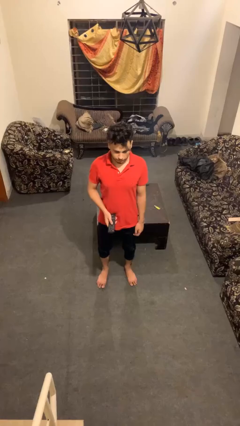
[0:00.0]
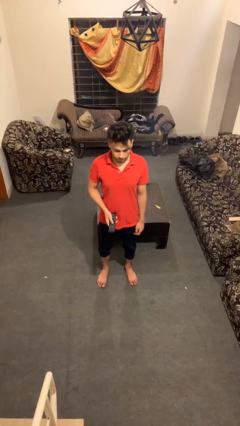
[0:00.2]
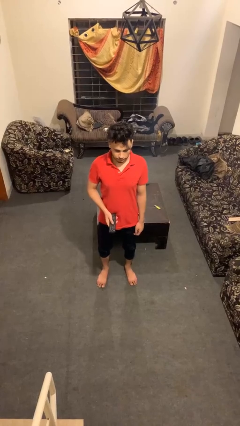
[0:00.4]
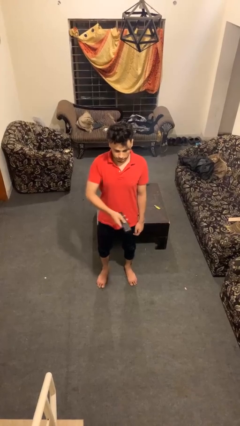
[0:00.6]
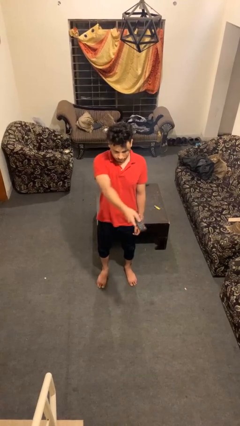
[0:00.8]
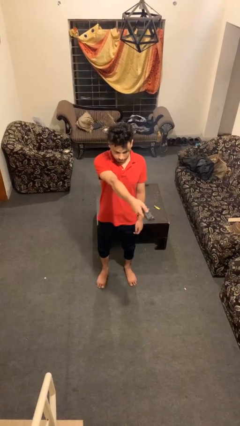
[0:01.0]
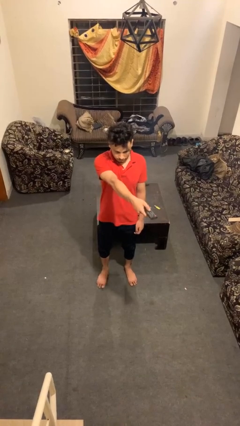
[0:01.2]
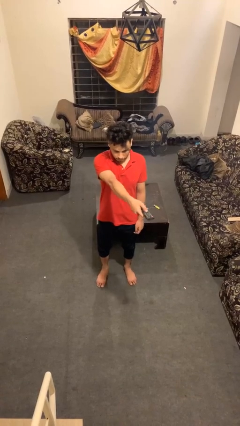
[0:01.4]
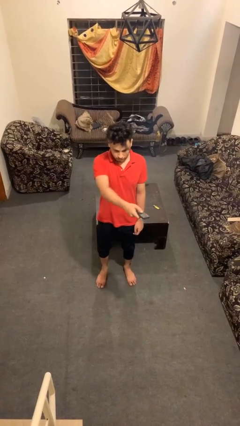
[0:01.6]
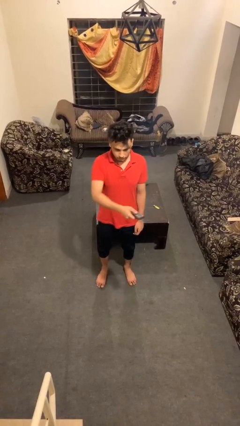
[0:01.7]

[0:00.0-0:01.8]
person uses television remote

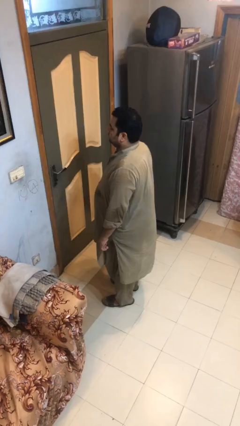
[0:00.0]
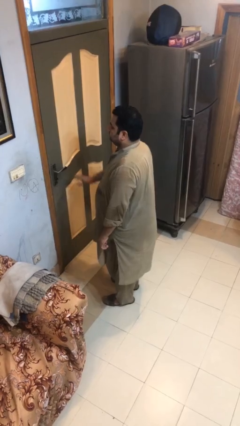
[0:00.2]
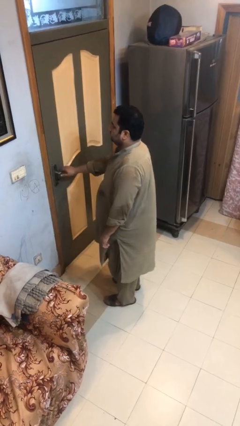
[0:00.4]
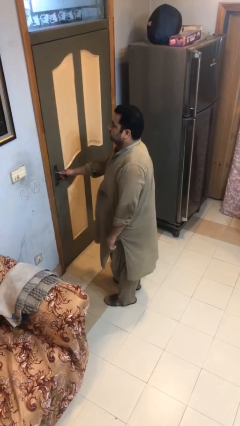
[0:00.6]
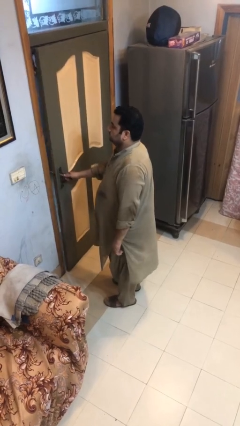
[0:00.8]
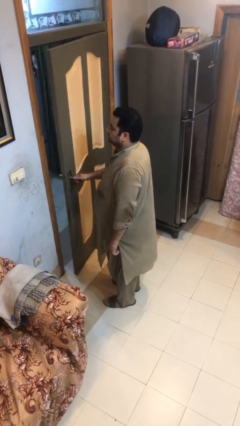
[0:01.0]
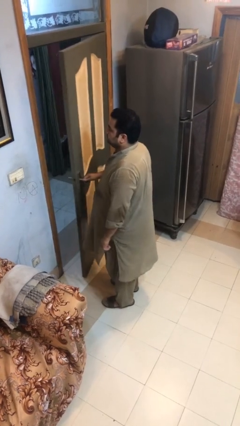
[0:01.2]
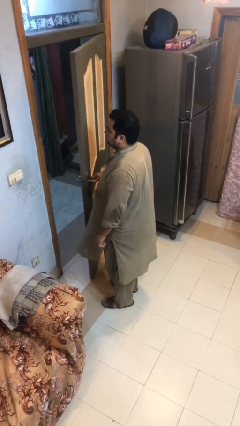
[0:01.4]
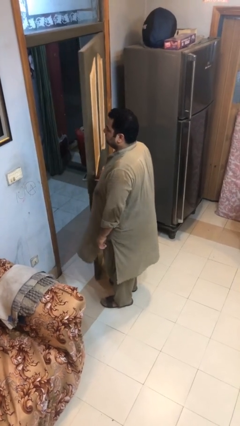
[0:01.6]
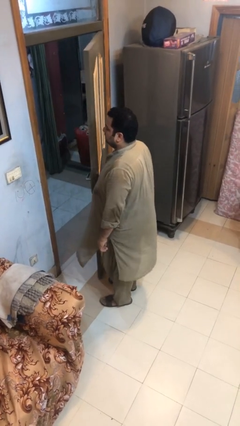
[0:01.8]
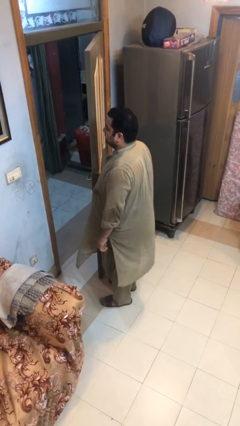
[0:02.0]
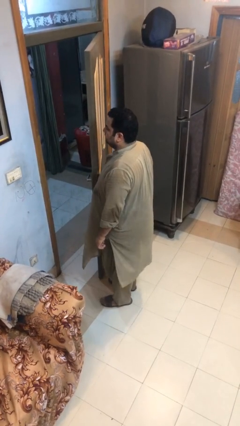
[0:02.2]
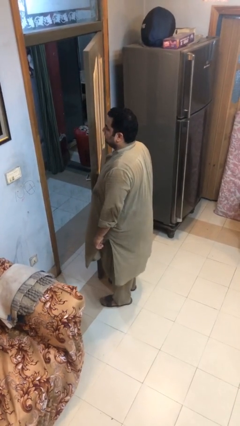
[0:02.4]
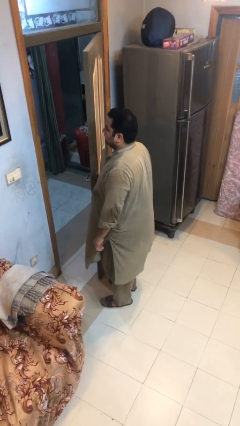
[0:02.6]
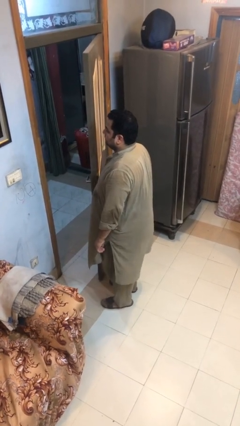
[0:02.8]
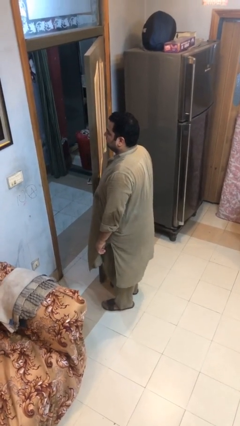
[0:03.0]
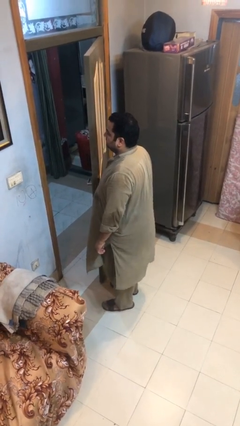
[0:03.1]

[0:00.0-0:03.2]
person opens facility door

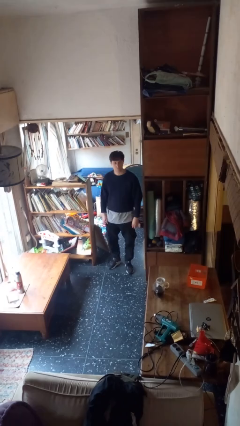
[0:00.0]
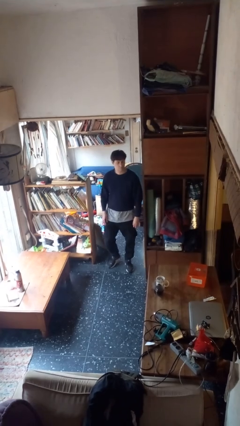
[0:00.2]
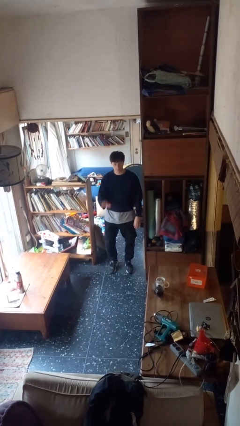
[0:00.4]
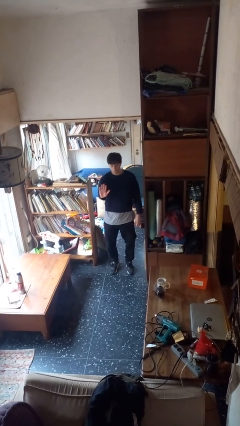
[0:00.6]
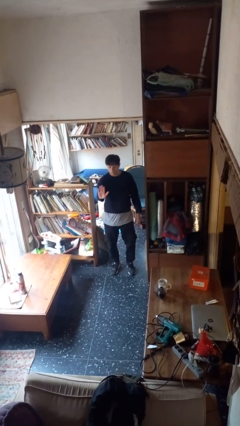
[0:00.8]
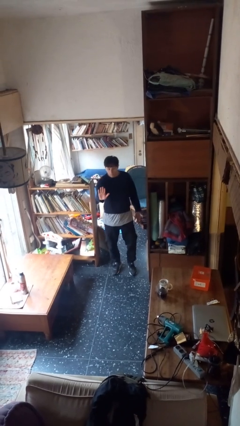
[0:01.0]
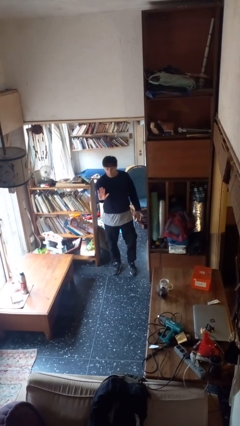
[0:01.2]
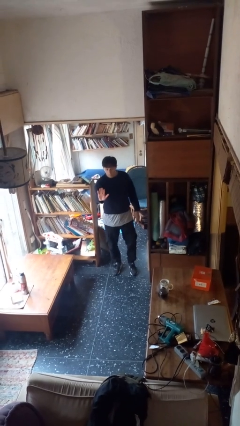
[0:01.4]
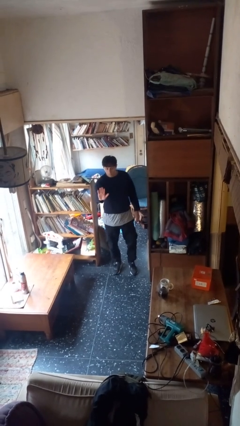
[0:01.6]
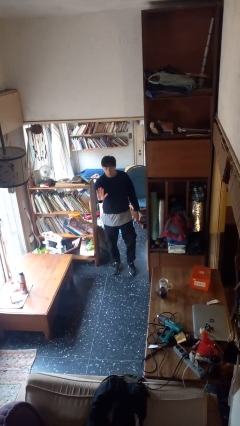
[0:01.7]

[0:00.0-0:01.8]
person gestures stop

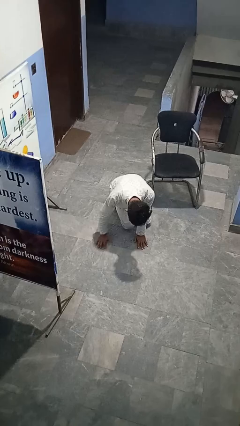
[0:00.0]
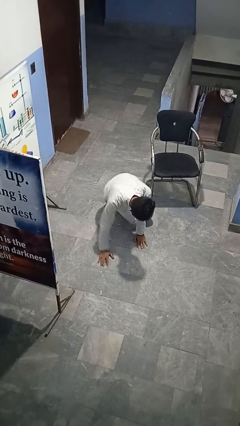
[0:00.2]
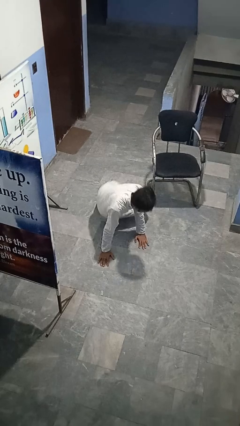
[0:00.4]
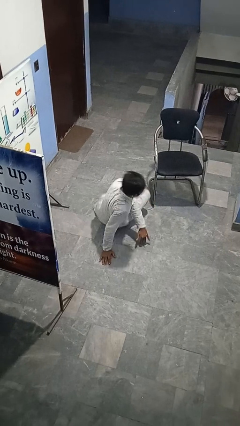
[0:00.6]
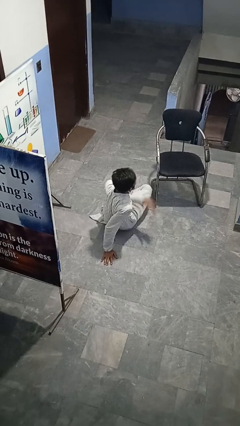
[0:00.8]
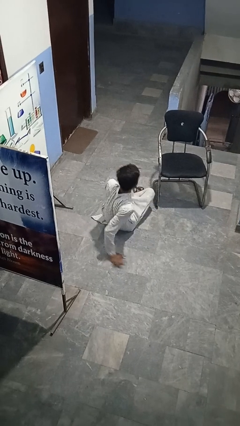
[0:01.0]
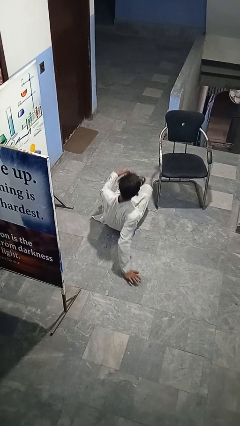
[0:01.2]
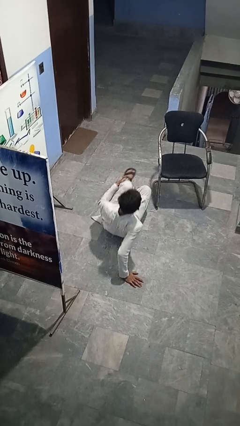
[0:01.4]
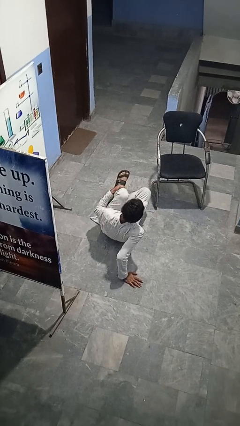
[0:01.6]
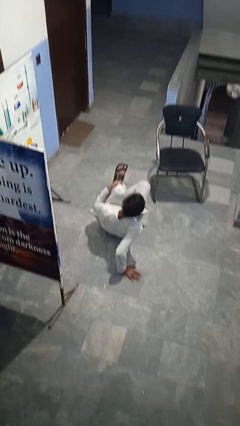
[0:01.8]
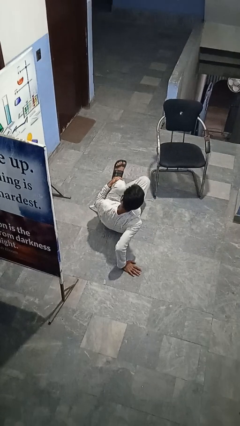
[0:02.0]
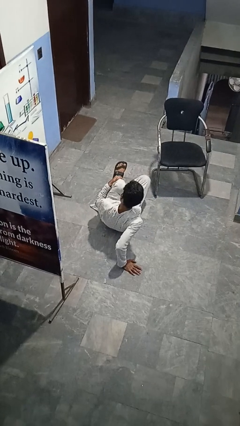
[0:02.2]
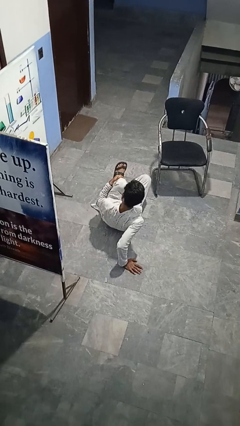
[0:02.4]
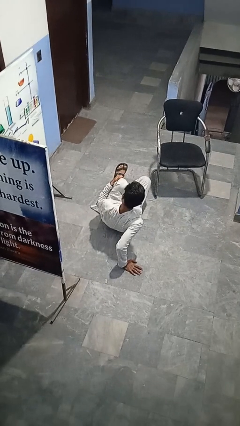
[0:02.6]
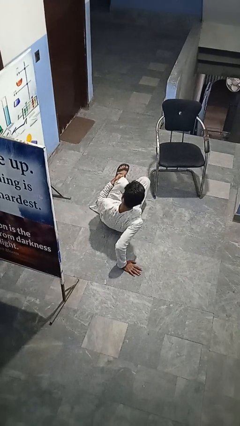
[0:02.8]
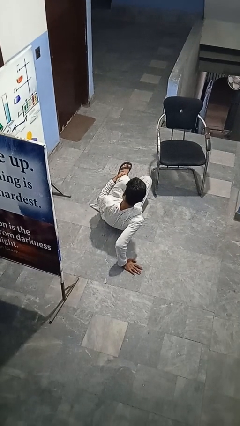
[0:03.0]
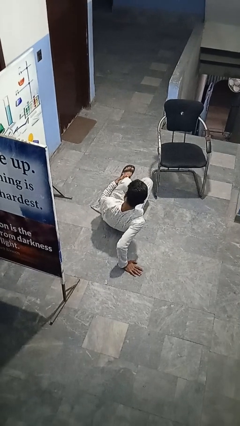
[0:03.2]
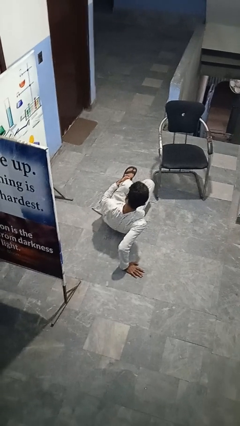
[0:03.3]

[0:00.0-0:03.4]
person lies down on floor

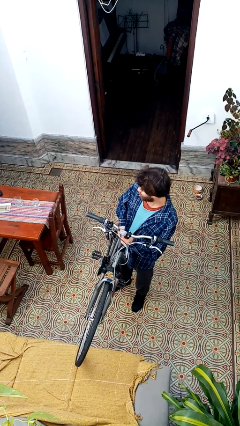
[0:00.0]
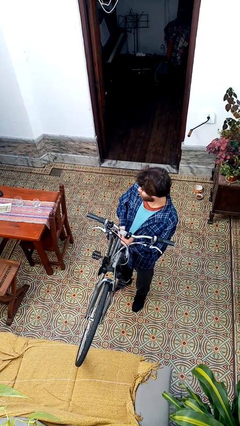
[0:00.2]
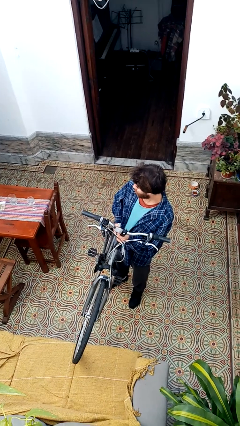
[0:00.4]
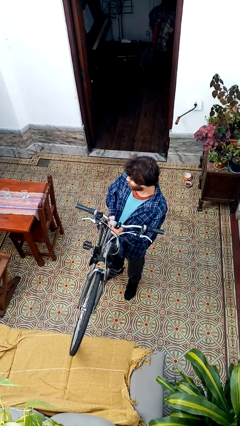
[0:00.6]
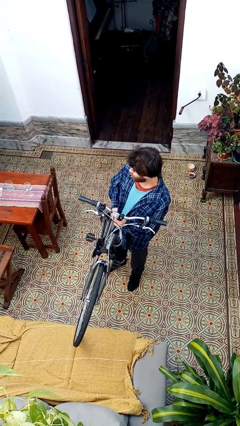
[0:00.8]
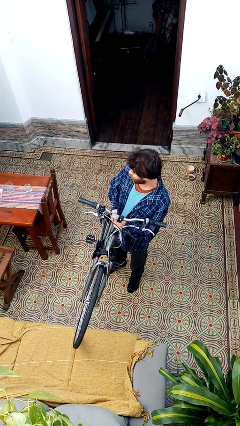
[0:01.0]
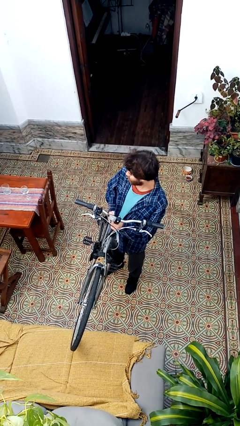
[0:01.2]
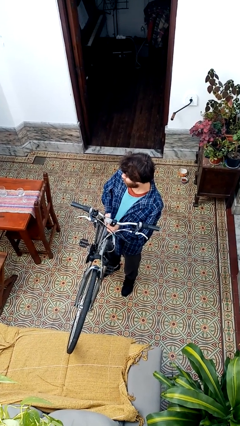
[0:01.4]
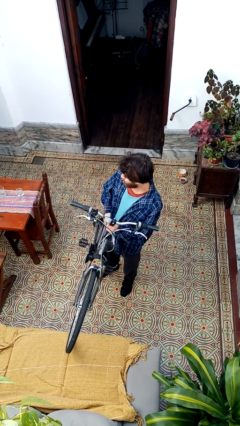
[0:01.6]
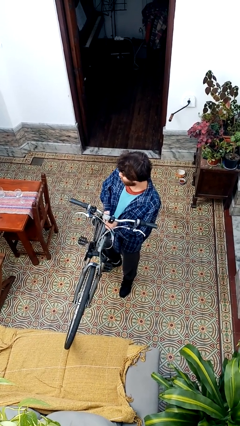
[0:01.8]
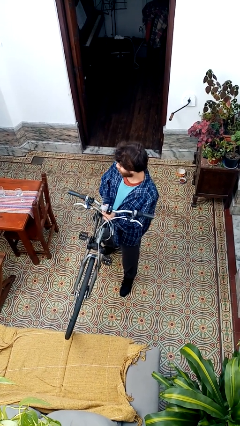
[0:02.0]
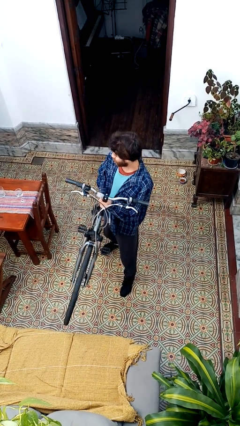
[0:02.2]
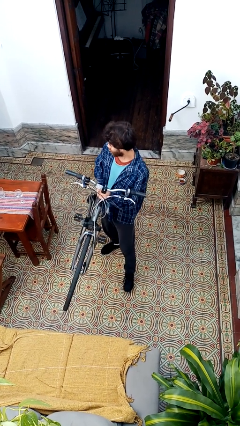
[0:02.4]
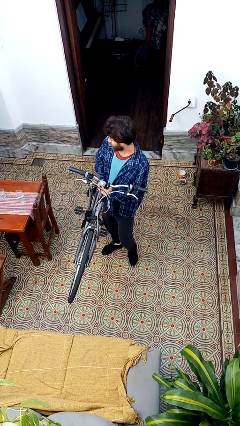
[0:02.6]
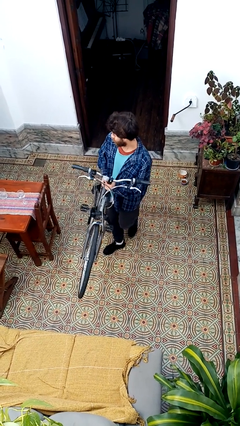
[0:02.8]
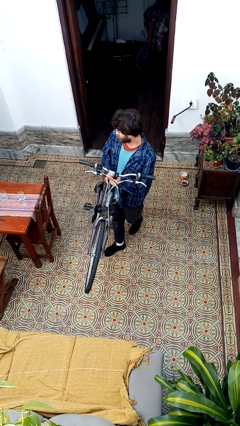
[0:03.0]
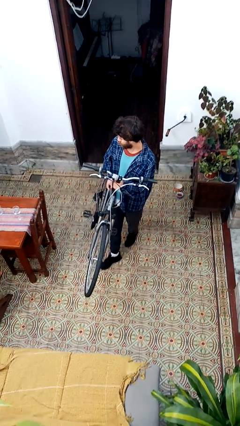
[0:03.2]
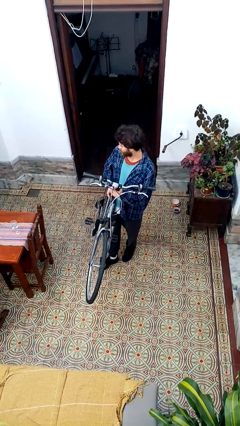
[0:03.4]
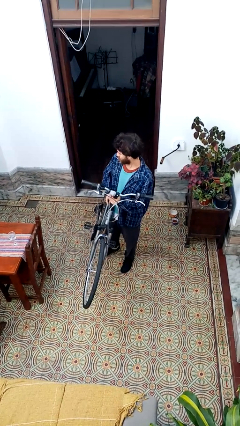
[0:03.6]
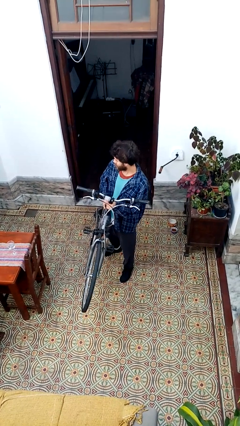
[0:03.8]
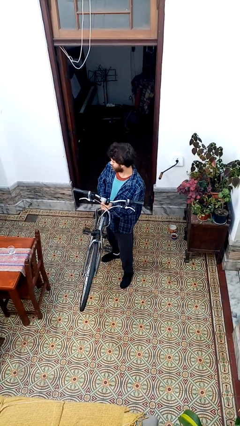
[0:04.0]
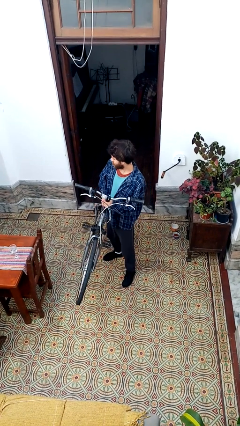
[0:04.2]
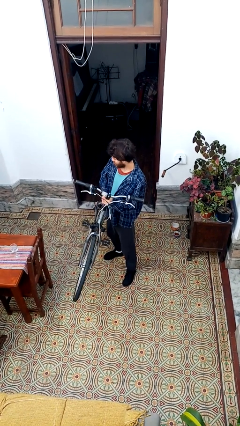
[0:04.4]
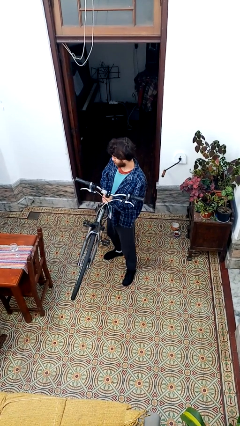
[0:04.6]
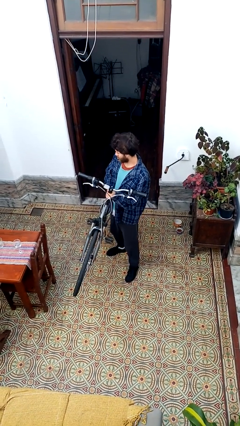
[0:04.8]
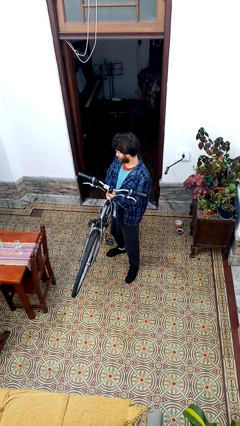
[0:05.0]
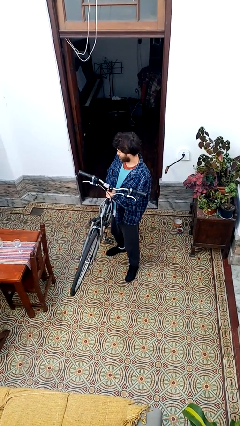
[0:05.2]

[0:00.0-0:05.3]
person carries bicycle

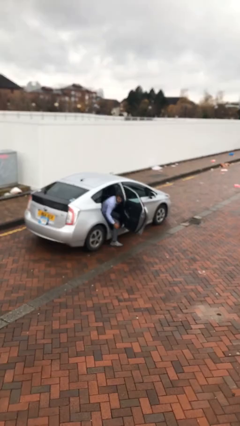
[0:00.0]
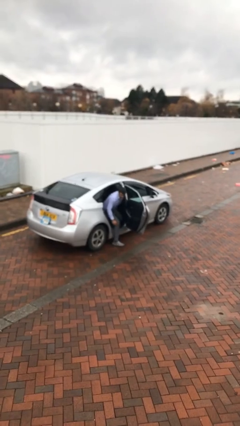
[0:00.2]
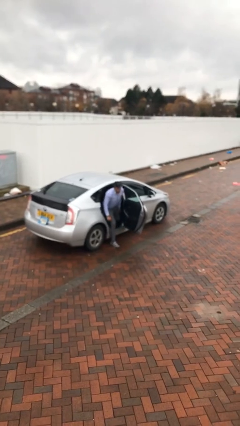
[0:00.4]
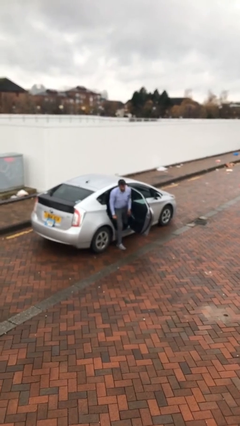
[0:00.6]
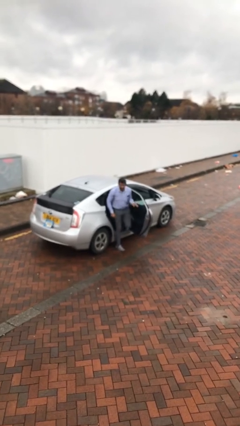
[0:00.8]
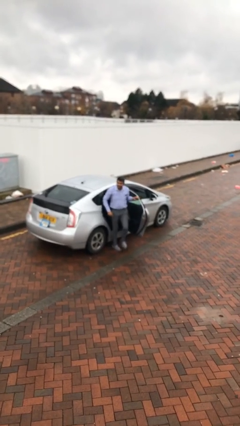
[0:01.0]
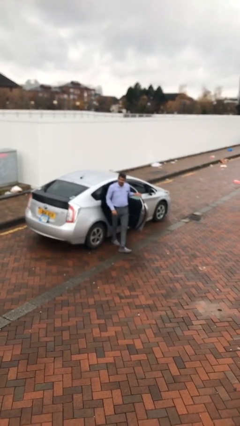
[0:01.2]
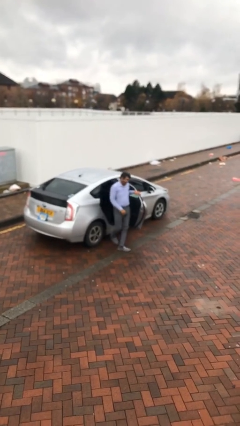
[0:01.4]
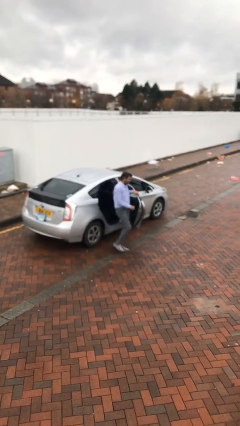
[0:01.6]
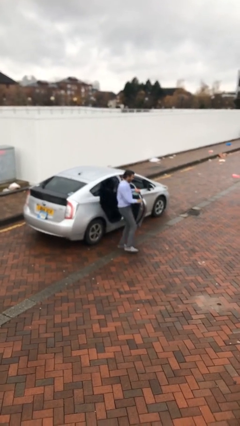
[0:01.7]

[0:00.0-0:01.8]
person exits car

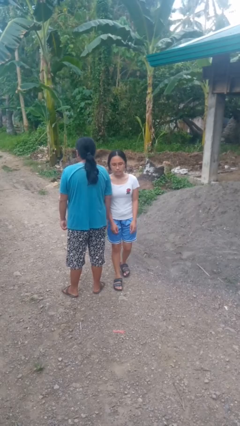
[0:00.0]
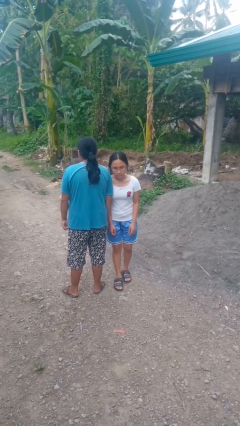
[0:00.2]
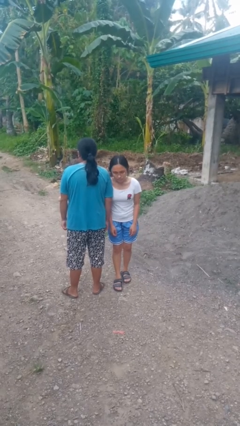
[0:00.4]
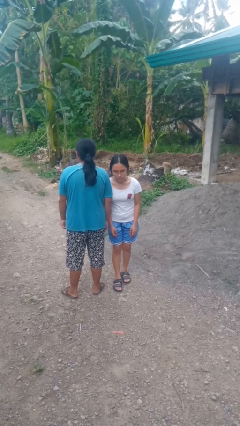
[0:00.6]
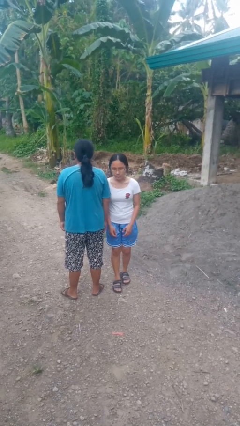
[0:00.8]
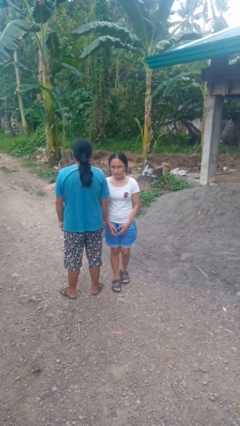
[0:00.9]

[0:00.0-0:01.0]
person bumps into person
